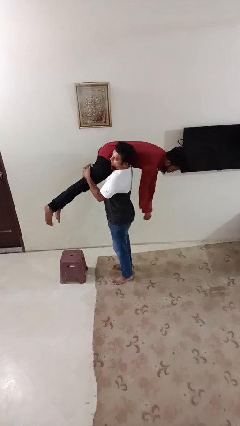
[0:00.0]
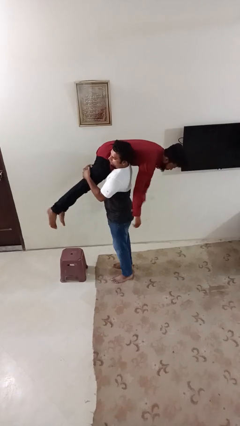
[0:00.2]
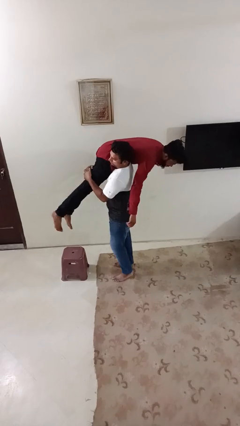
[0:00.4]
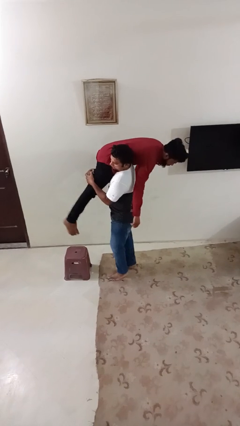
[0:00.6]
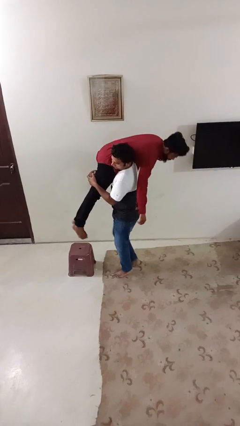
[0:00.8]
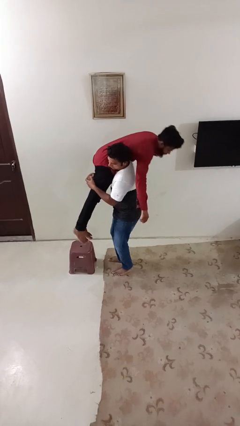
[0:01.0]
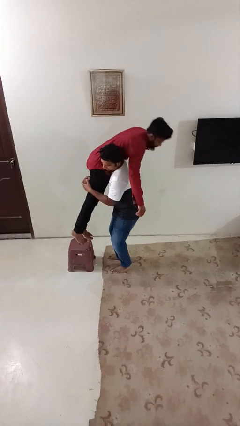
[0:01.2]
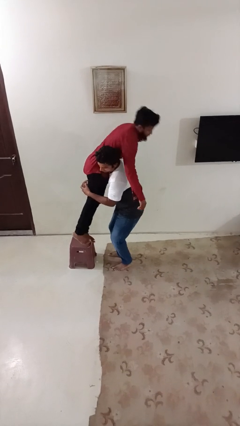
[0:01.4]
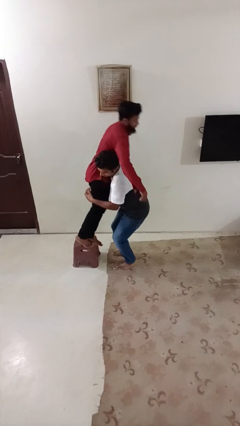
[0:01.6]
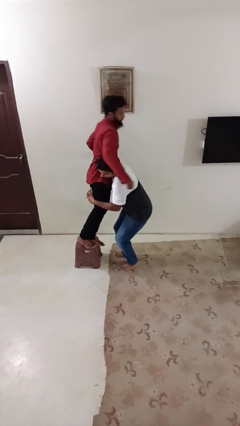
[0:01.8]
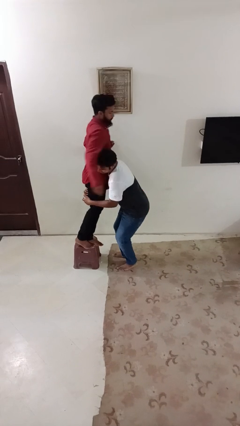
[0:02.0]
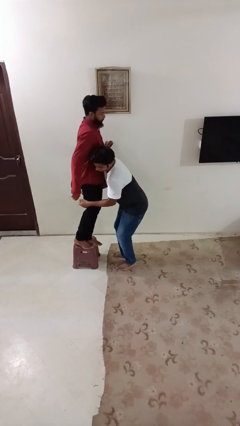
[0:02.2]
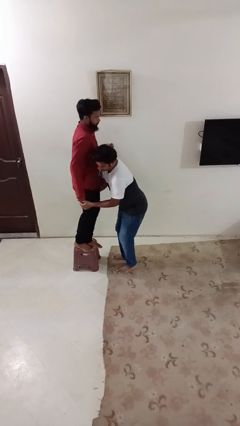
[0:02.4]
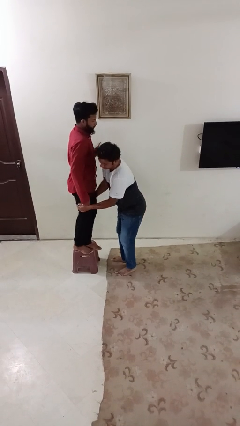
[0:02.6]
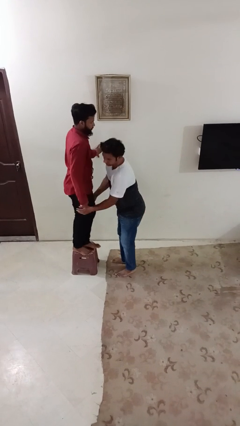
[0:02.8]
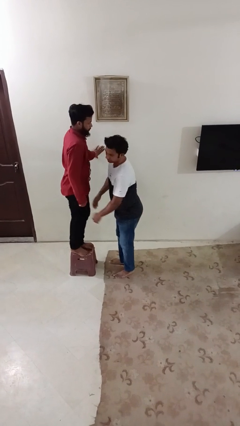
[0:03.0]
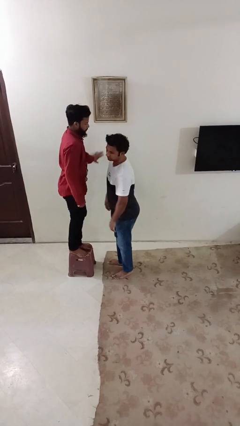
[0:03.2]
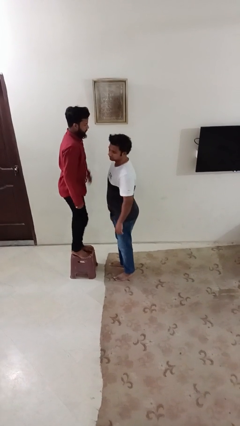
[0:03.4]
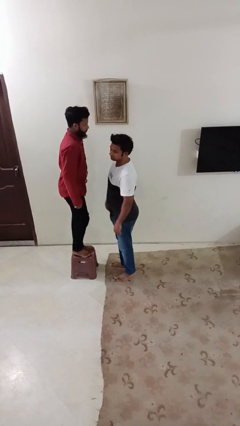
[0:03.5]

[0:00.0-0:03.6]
person puts down person

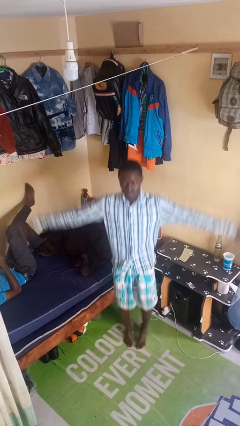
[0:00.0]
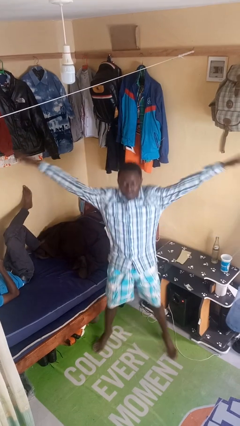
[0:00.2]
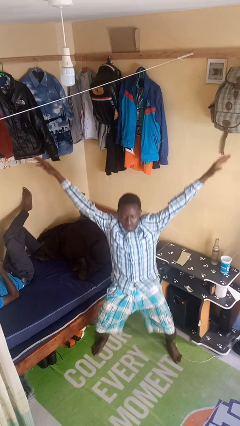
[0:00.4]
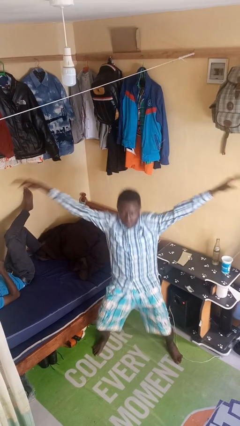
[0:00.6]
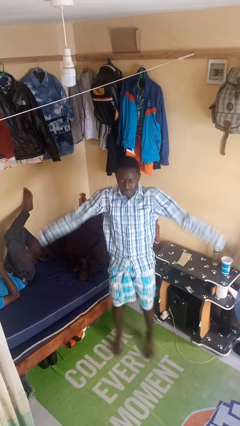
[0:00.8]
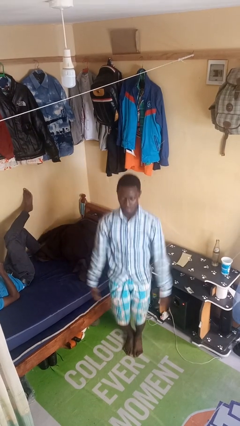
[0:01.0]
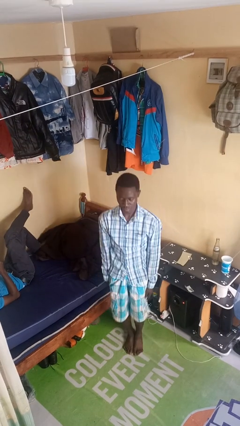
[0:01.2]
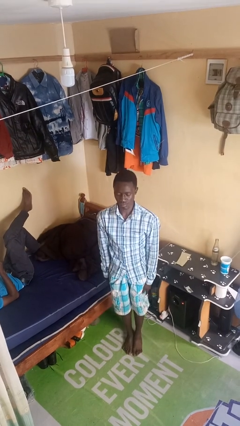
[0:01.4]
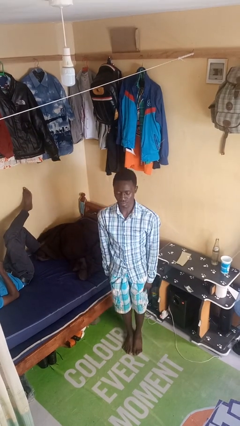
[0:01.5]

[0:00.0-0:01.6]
person exercises with jumping jacks

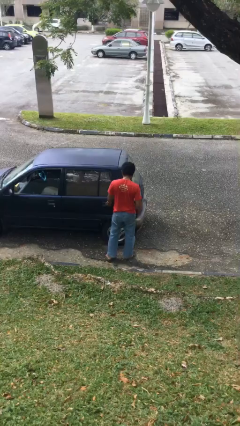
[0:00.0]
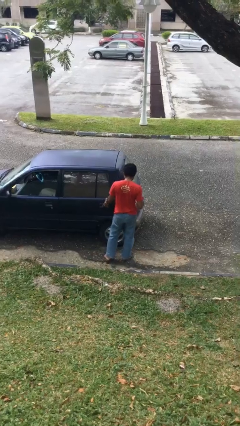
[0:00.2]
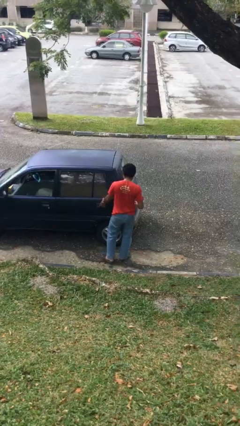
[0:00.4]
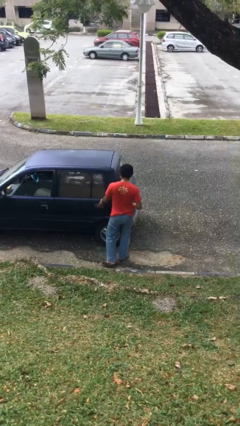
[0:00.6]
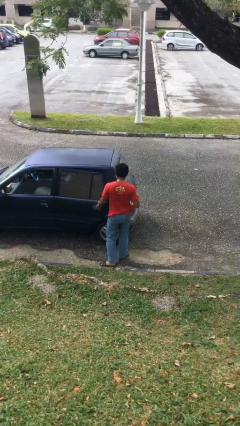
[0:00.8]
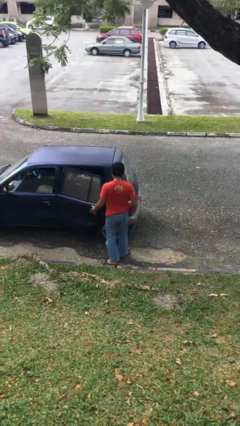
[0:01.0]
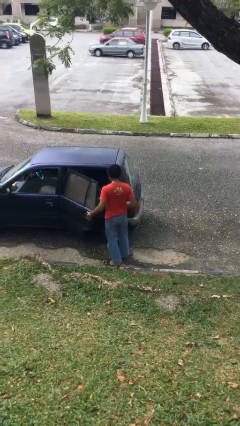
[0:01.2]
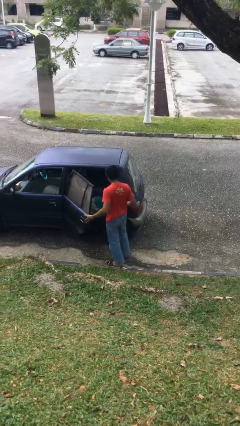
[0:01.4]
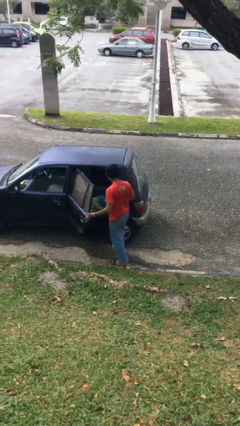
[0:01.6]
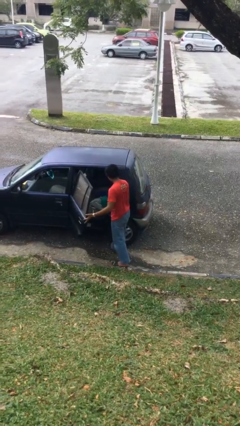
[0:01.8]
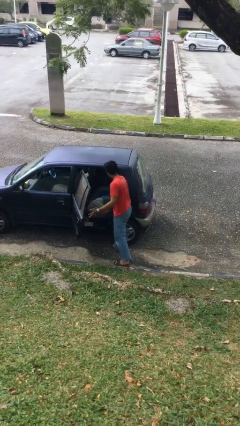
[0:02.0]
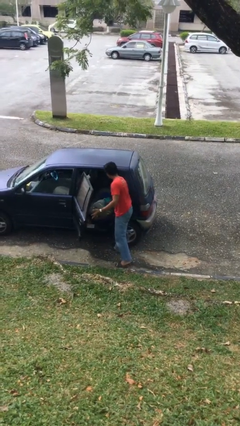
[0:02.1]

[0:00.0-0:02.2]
person opens car door

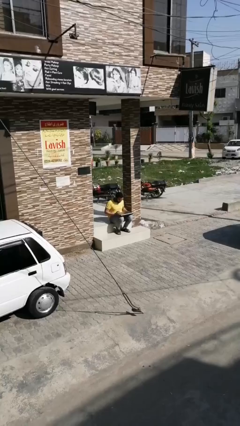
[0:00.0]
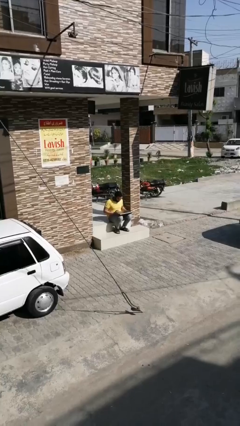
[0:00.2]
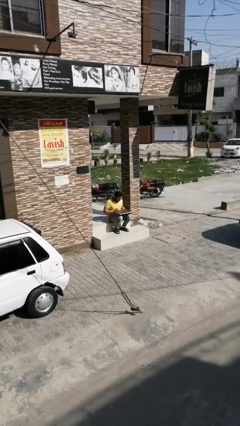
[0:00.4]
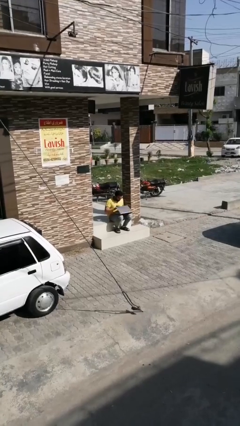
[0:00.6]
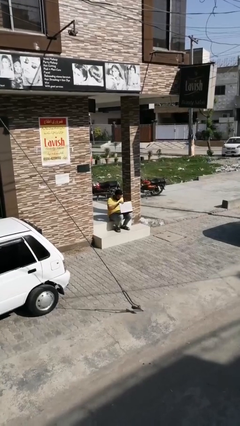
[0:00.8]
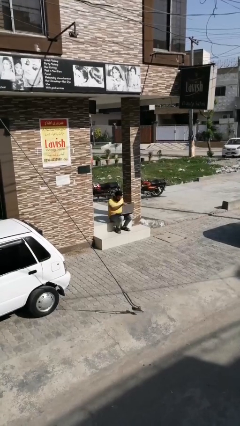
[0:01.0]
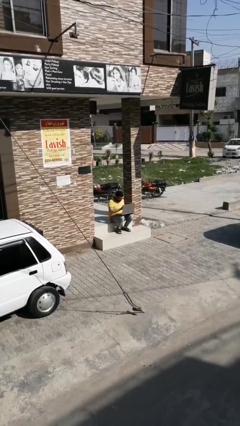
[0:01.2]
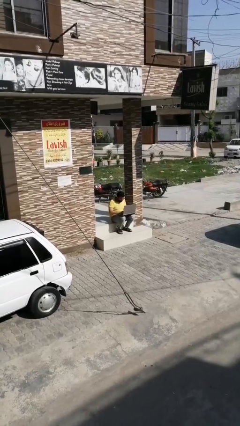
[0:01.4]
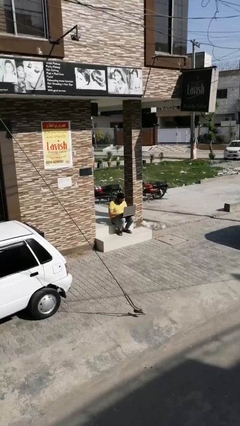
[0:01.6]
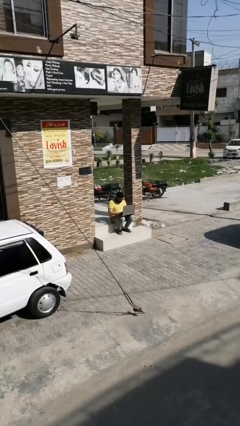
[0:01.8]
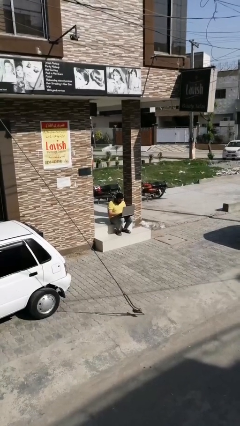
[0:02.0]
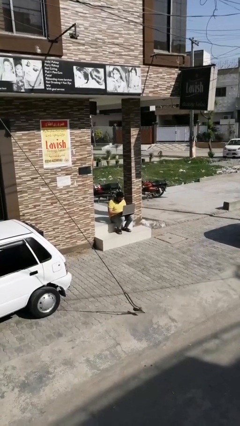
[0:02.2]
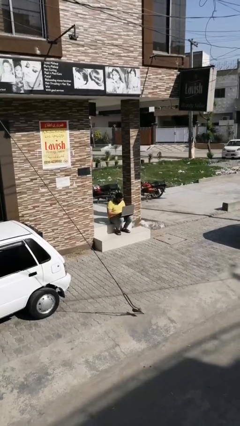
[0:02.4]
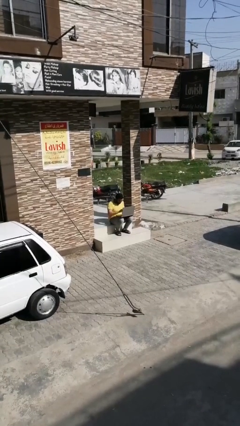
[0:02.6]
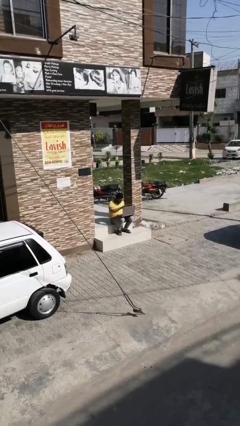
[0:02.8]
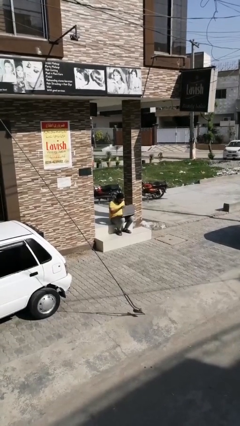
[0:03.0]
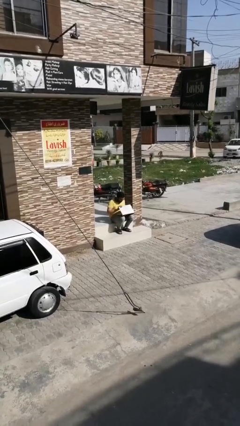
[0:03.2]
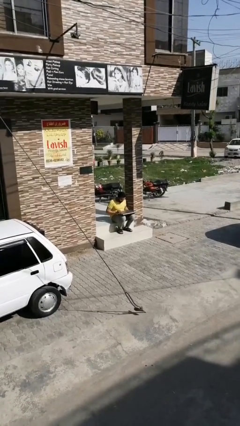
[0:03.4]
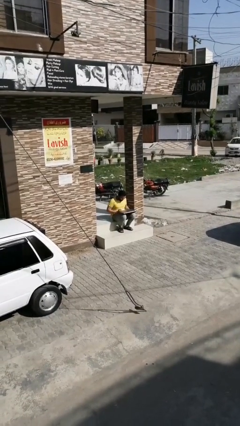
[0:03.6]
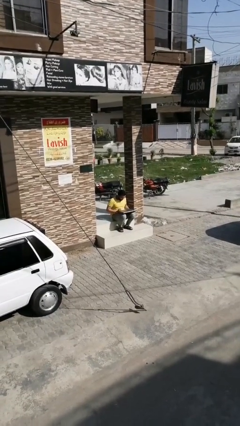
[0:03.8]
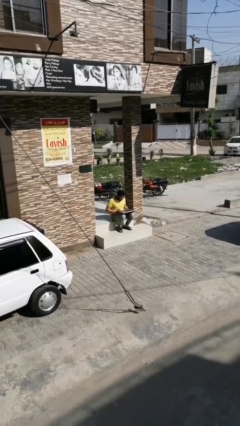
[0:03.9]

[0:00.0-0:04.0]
person interacts with laptop

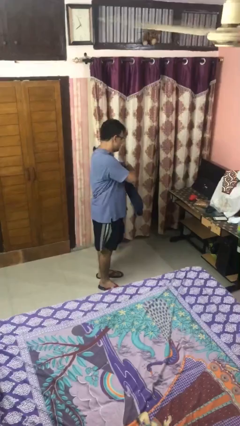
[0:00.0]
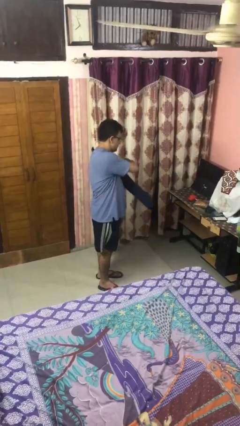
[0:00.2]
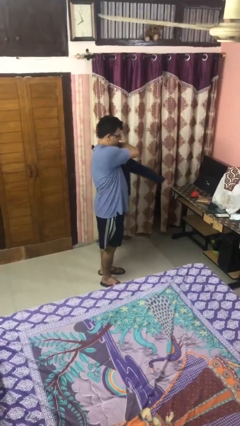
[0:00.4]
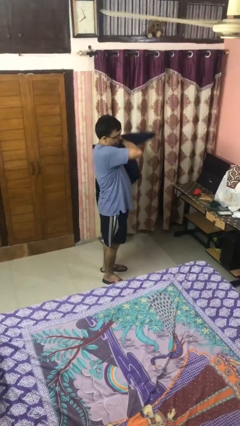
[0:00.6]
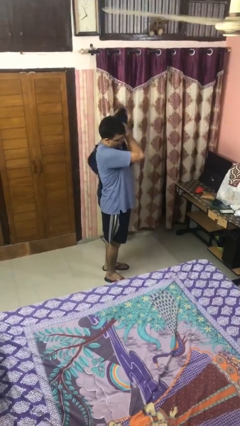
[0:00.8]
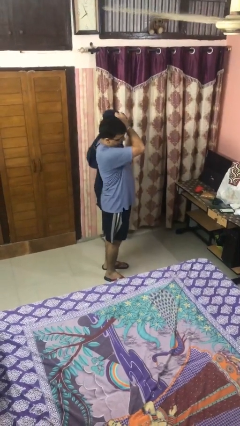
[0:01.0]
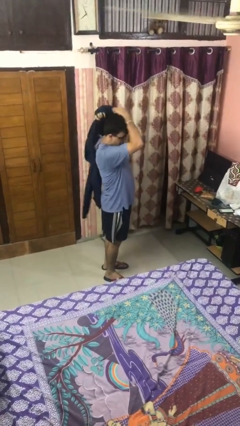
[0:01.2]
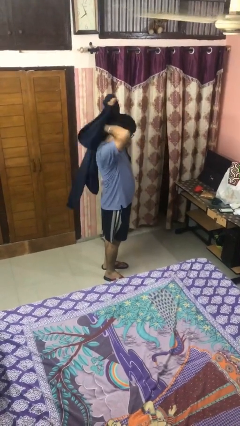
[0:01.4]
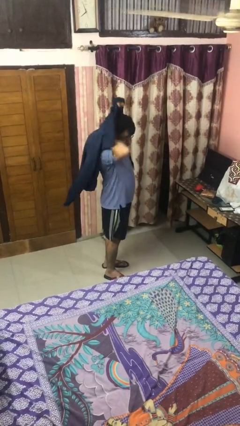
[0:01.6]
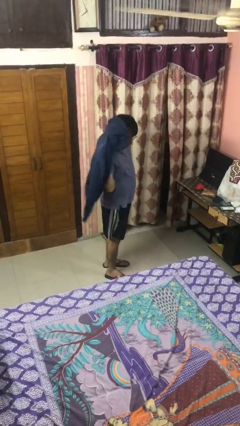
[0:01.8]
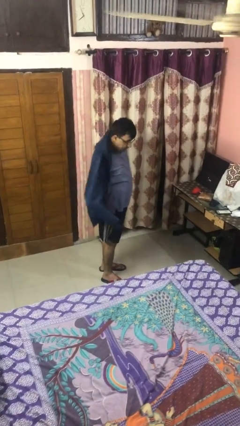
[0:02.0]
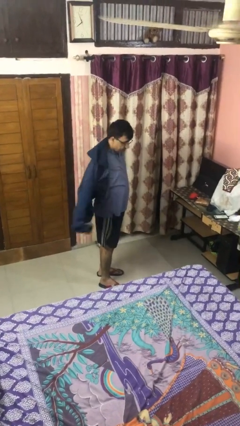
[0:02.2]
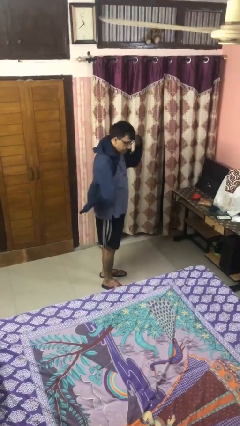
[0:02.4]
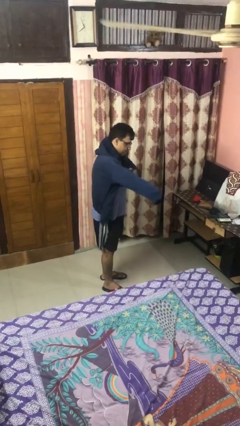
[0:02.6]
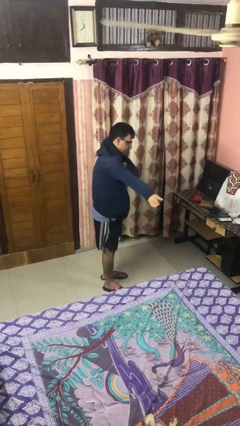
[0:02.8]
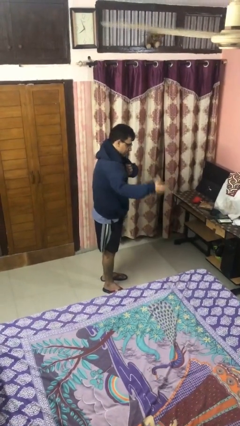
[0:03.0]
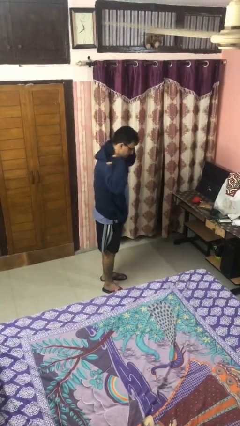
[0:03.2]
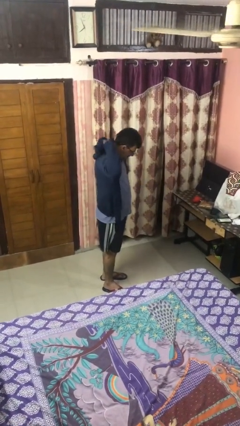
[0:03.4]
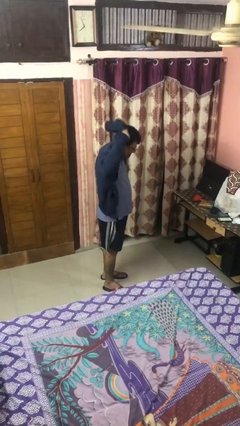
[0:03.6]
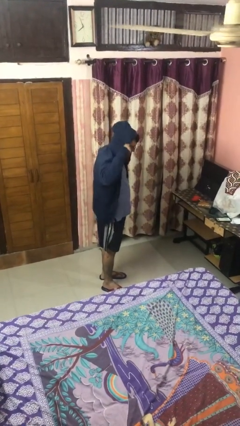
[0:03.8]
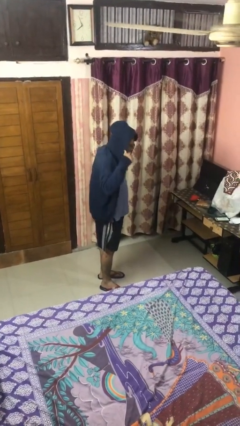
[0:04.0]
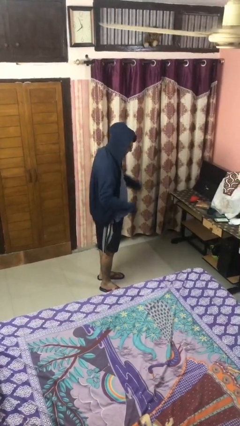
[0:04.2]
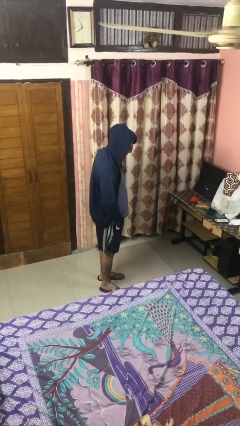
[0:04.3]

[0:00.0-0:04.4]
person puts on hoodie

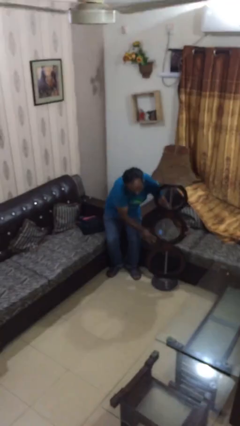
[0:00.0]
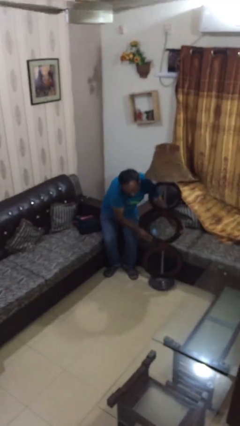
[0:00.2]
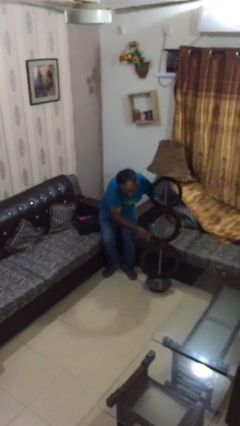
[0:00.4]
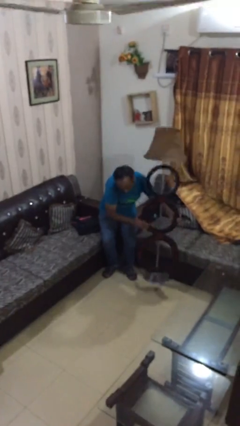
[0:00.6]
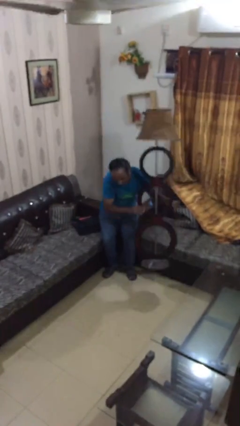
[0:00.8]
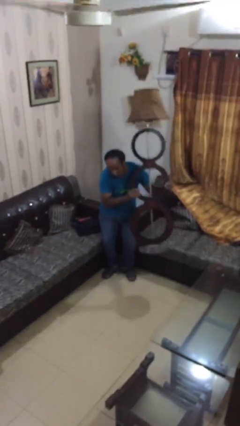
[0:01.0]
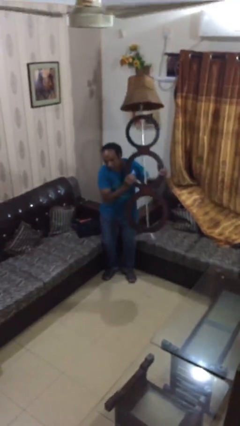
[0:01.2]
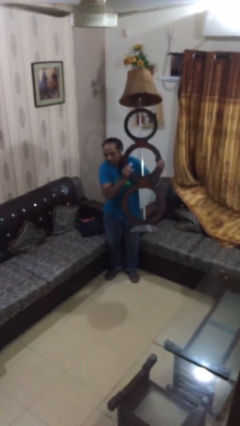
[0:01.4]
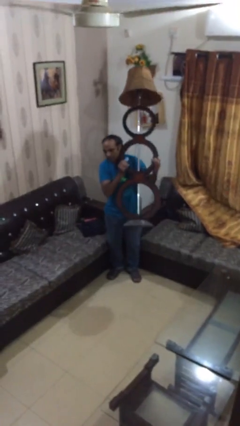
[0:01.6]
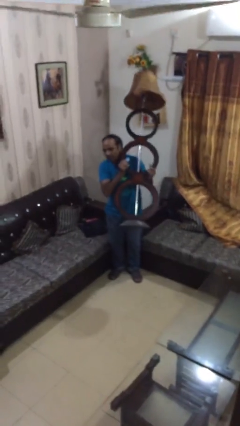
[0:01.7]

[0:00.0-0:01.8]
person picks up object from floor
